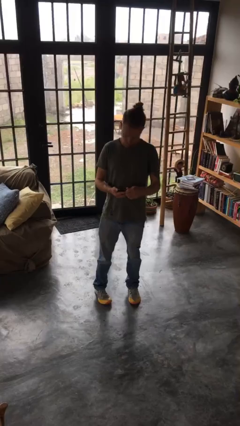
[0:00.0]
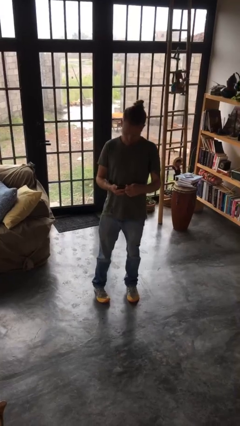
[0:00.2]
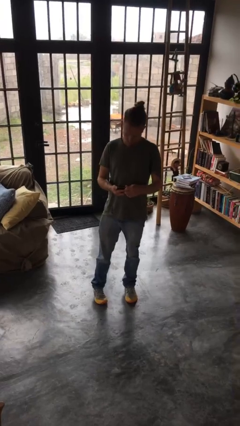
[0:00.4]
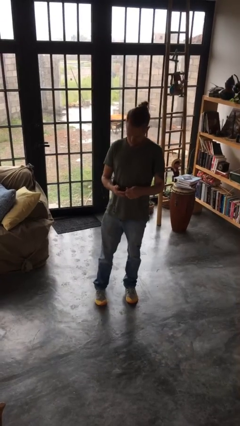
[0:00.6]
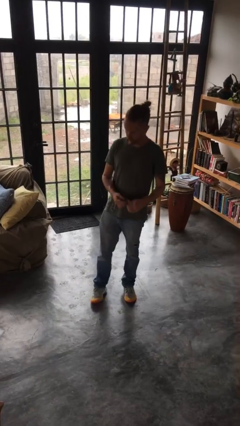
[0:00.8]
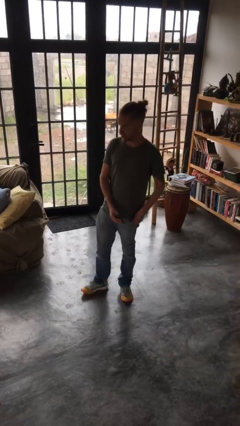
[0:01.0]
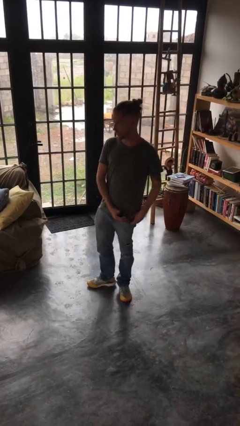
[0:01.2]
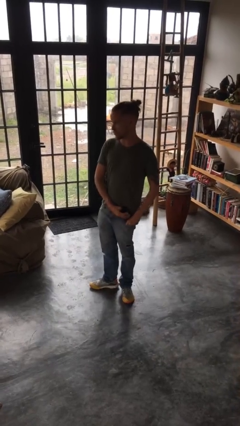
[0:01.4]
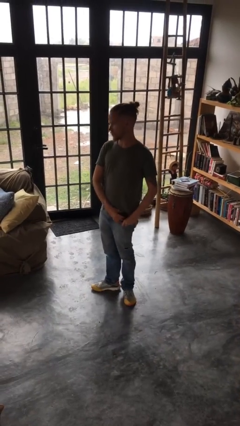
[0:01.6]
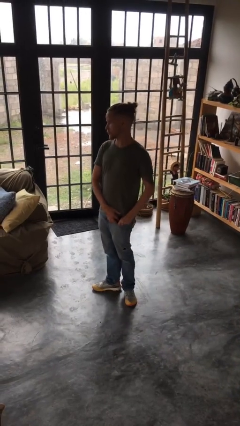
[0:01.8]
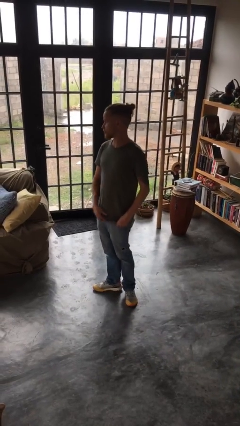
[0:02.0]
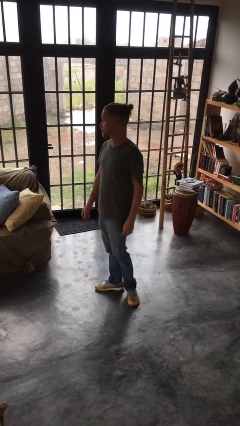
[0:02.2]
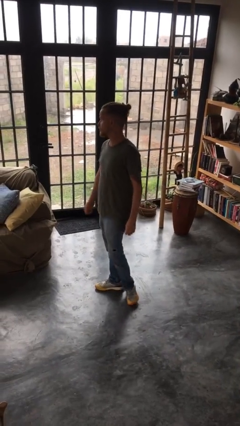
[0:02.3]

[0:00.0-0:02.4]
person puts phone into pocket

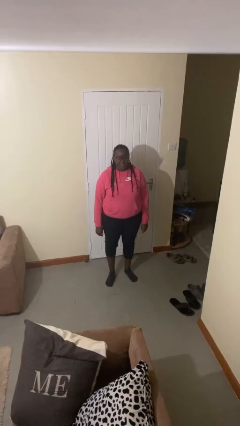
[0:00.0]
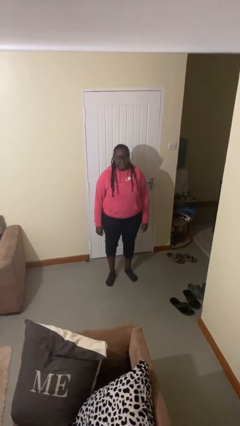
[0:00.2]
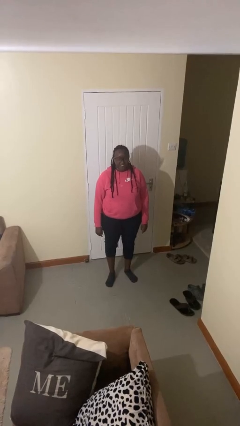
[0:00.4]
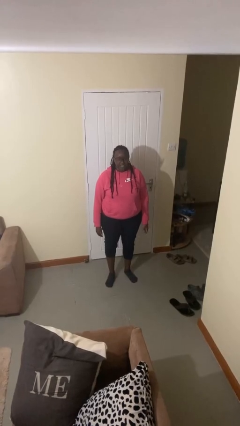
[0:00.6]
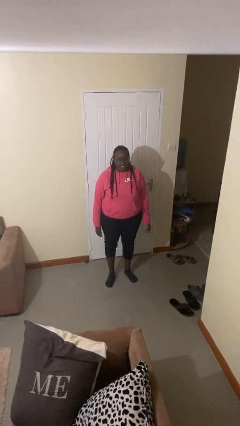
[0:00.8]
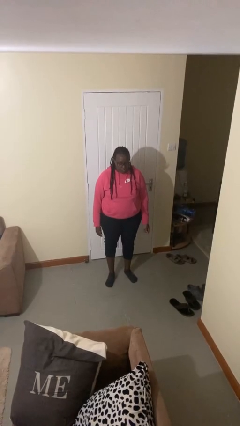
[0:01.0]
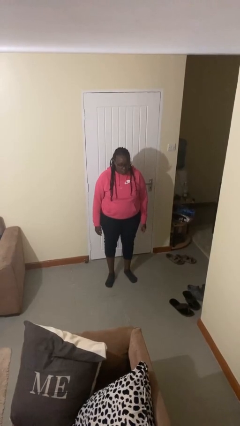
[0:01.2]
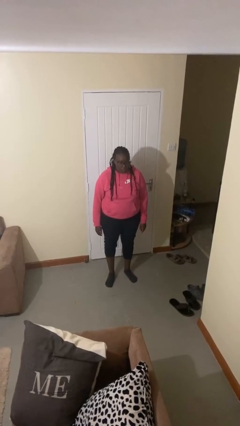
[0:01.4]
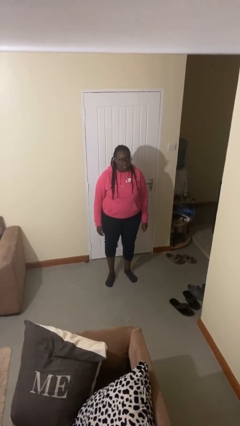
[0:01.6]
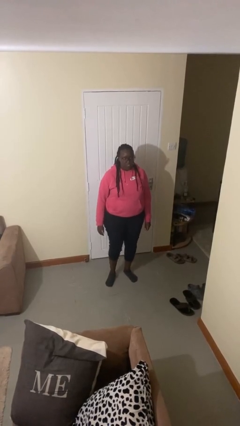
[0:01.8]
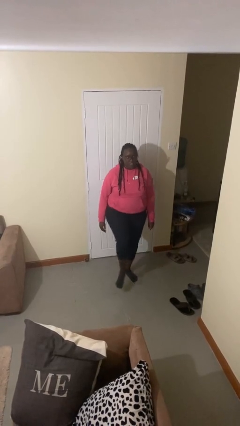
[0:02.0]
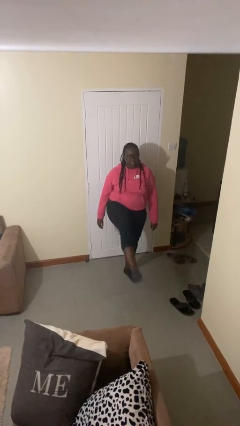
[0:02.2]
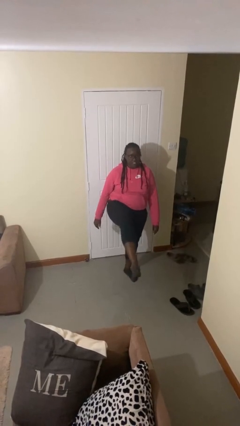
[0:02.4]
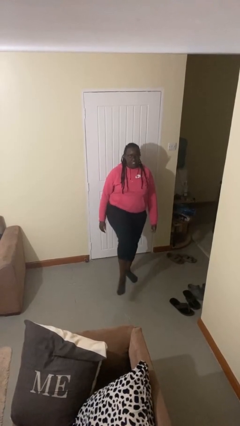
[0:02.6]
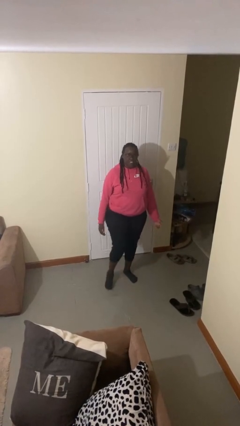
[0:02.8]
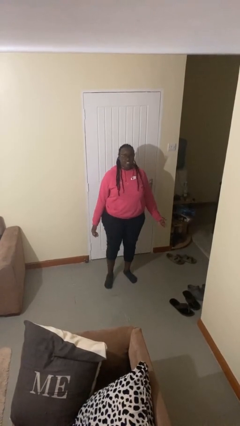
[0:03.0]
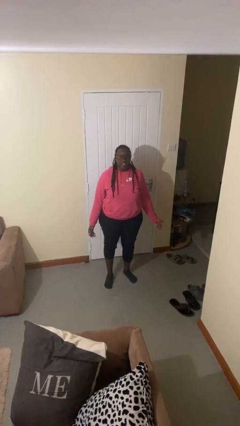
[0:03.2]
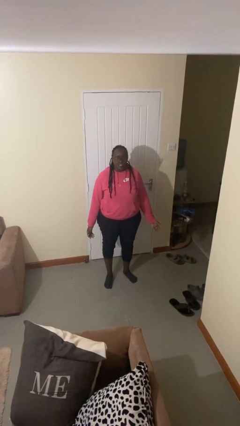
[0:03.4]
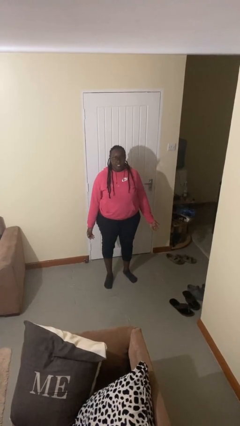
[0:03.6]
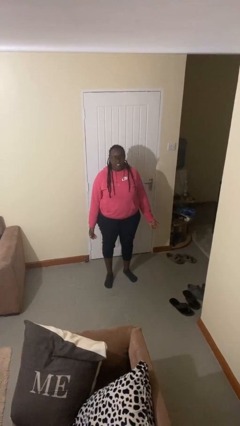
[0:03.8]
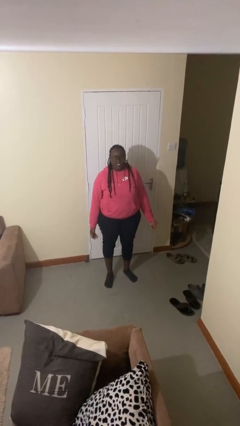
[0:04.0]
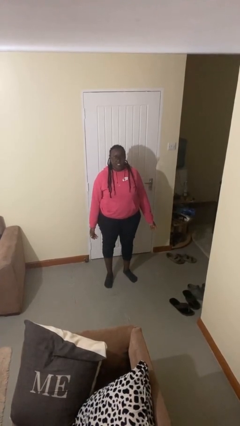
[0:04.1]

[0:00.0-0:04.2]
person karate kicks

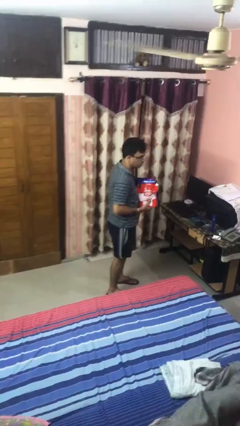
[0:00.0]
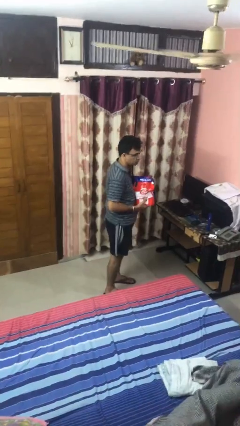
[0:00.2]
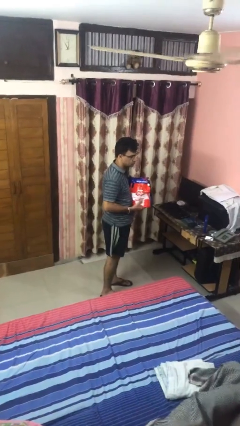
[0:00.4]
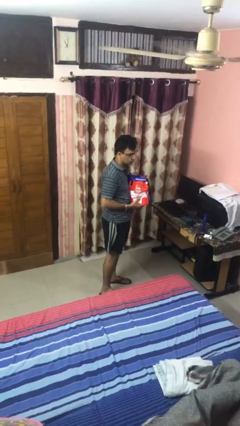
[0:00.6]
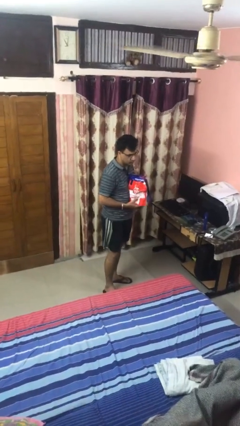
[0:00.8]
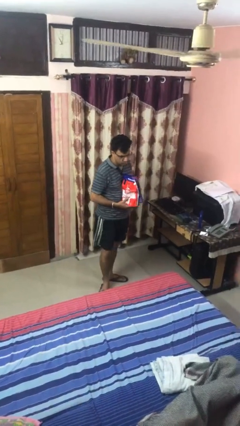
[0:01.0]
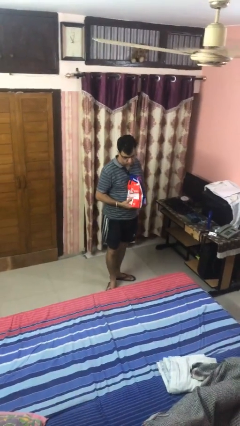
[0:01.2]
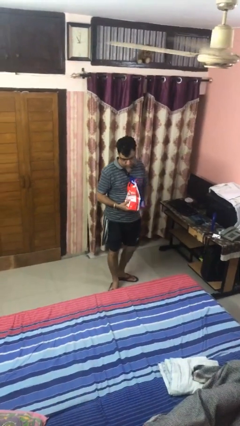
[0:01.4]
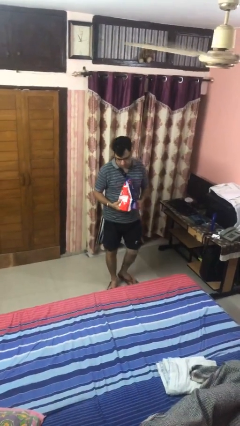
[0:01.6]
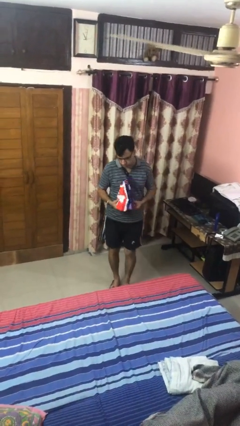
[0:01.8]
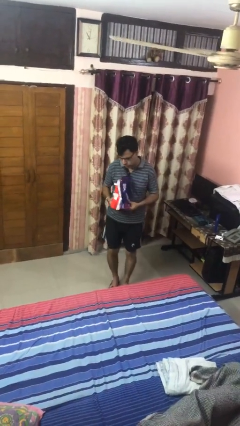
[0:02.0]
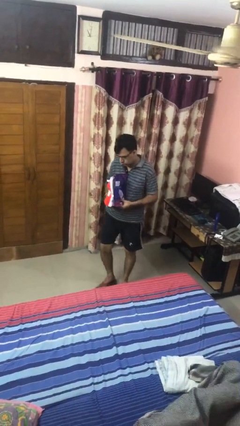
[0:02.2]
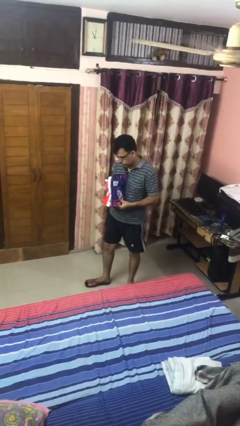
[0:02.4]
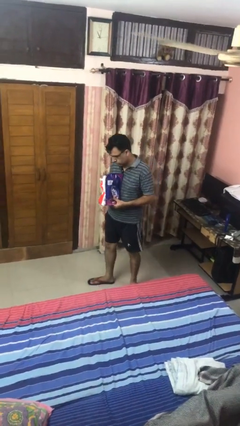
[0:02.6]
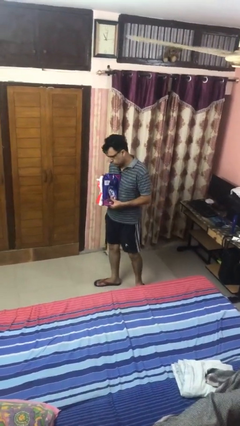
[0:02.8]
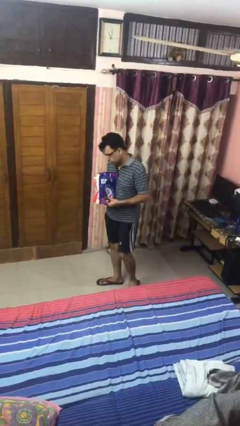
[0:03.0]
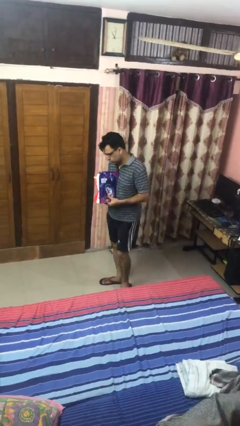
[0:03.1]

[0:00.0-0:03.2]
person carries groceries

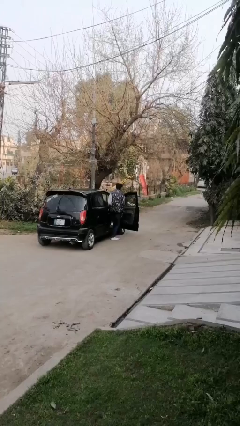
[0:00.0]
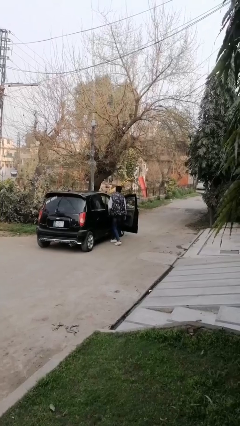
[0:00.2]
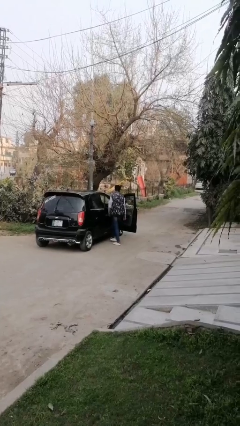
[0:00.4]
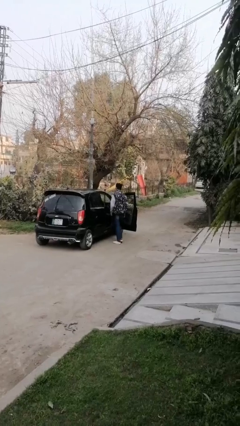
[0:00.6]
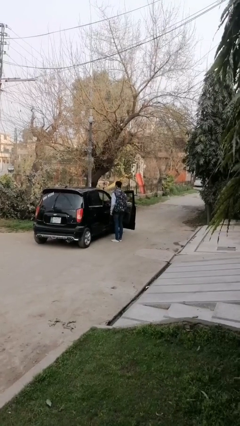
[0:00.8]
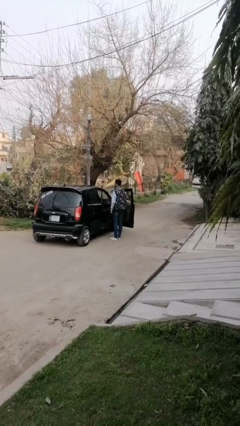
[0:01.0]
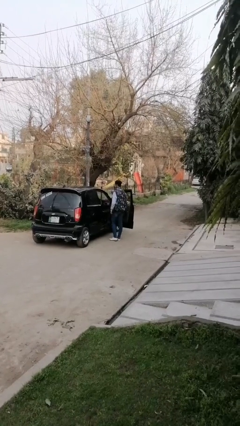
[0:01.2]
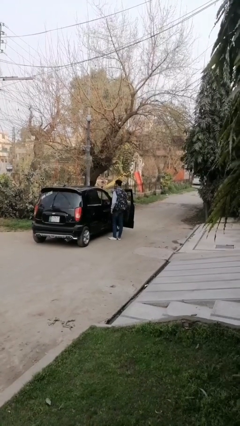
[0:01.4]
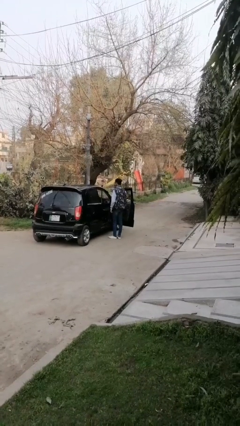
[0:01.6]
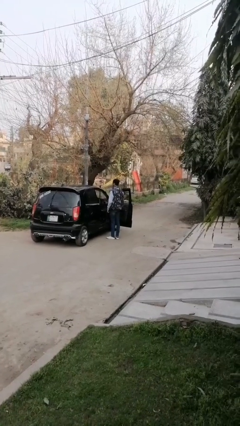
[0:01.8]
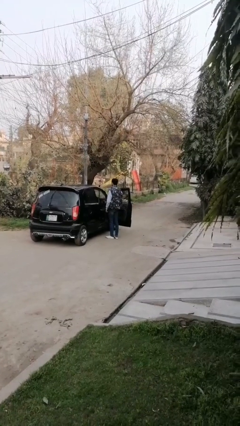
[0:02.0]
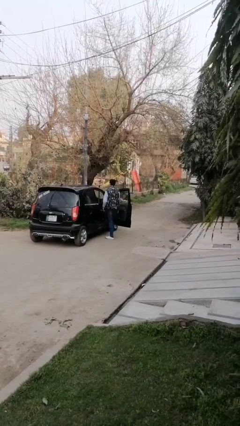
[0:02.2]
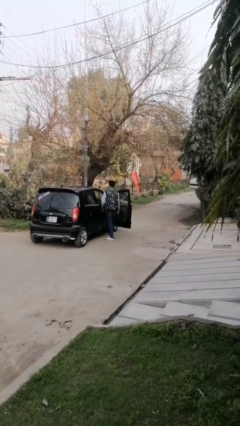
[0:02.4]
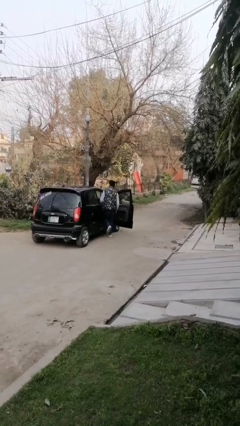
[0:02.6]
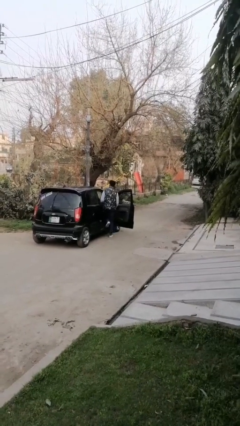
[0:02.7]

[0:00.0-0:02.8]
person exits car

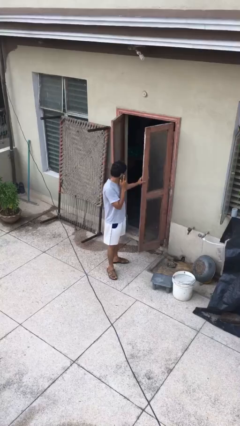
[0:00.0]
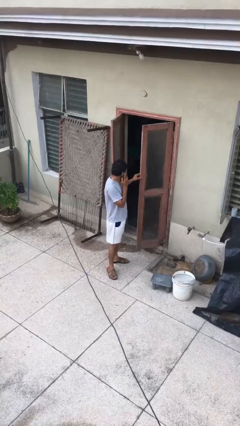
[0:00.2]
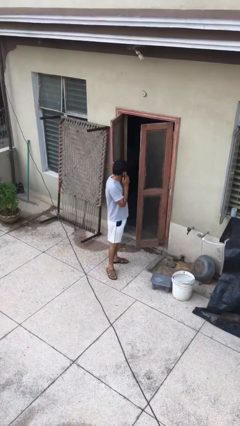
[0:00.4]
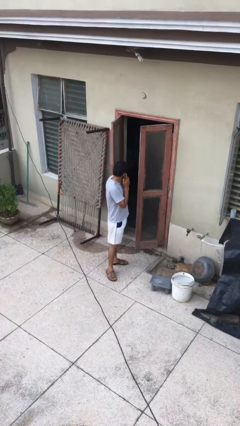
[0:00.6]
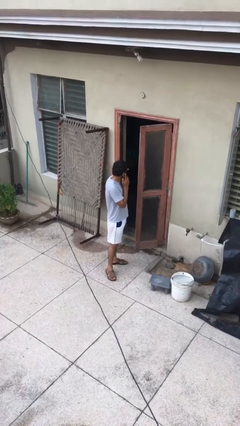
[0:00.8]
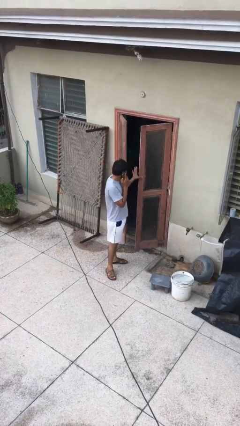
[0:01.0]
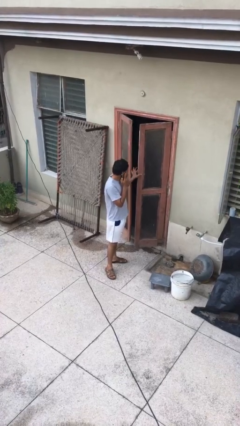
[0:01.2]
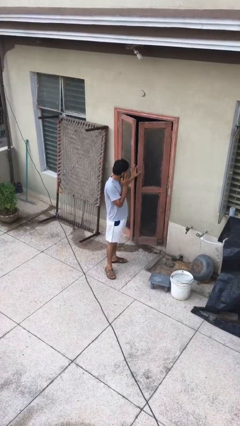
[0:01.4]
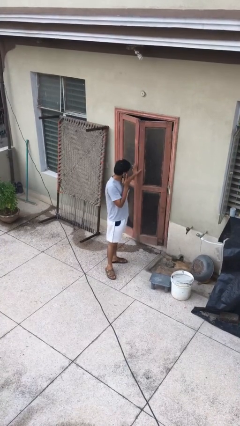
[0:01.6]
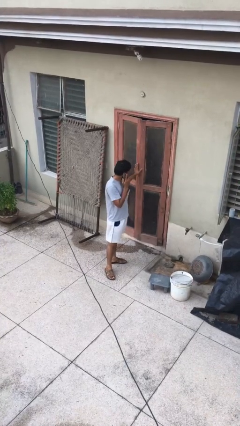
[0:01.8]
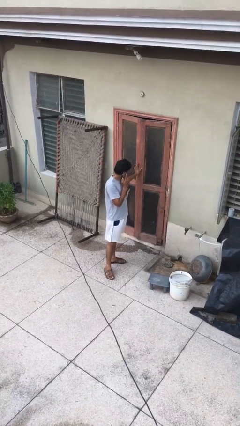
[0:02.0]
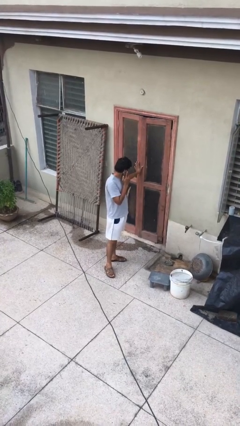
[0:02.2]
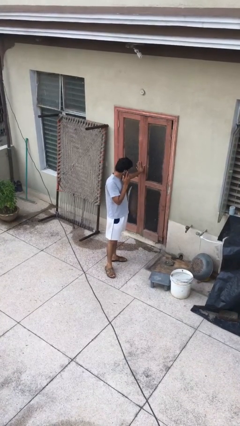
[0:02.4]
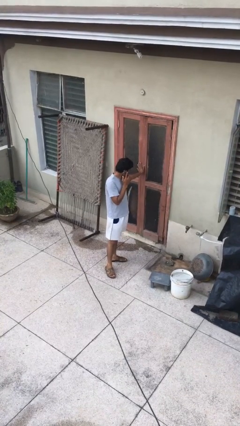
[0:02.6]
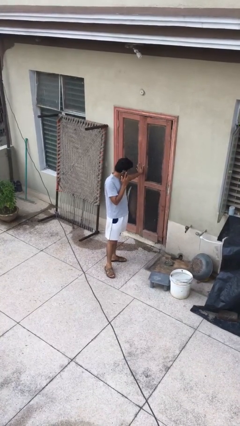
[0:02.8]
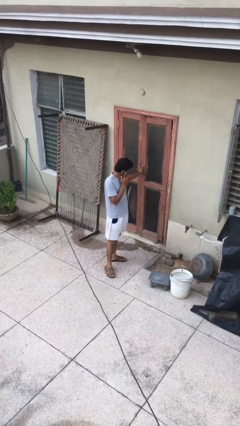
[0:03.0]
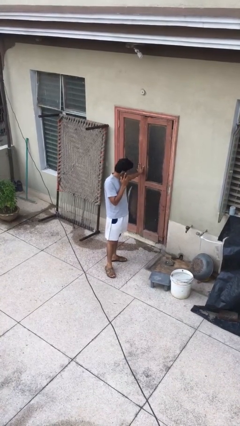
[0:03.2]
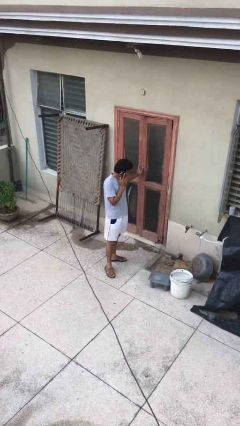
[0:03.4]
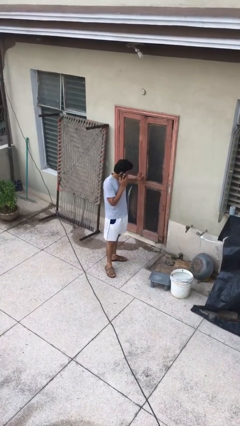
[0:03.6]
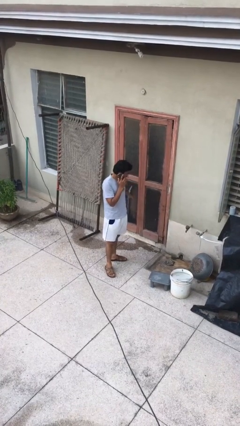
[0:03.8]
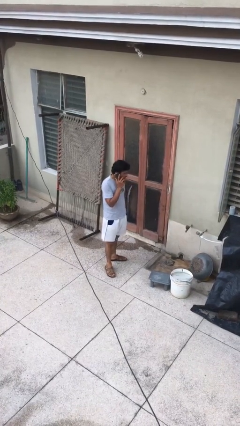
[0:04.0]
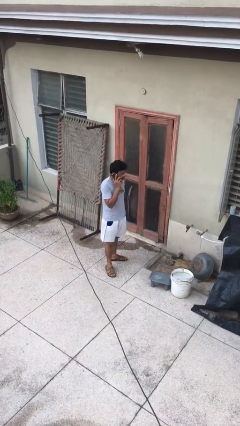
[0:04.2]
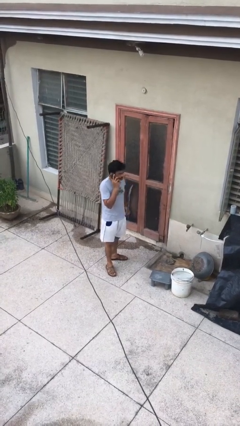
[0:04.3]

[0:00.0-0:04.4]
person closes facility door

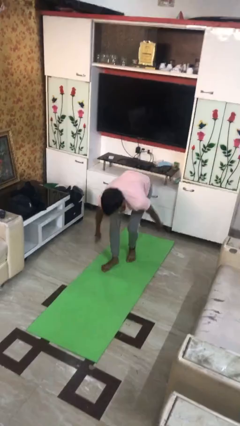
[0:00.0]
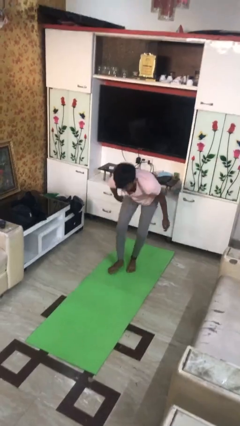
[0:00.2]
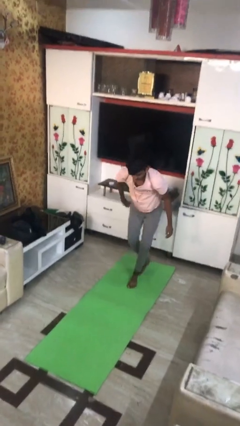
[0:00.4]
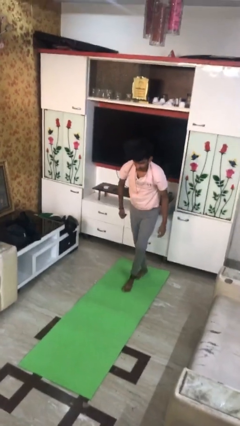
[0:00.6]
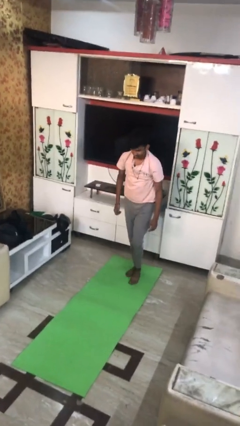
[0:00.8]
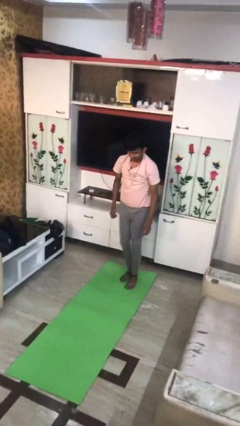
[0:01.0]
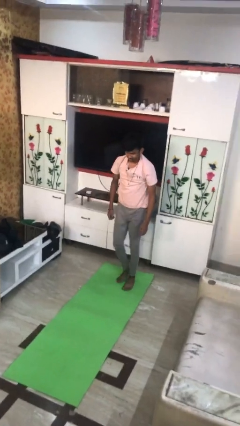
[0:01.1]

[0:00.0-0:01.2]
person stands up from floor
